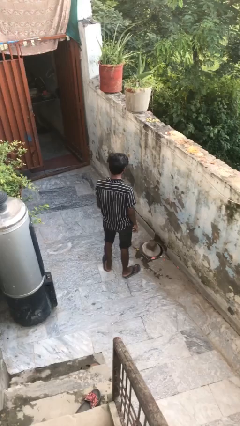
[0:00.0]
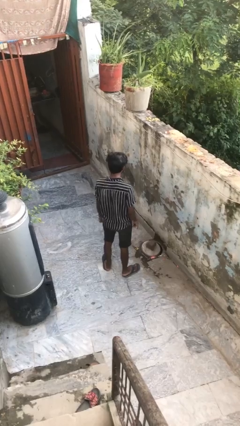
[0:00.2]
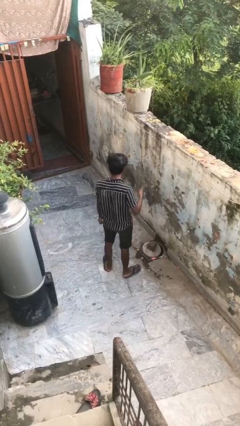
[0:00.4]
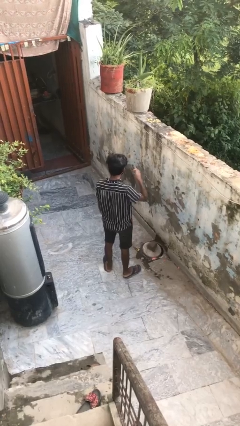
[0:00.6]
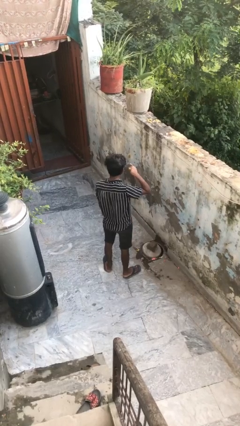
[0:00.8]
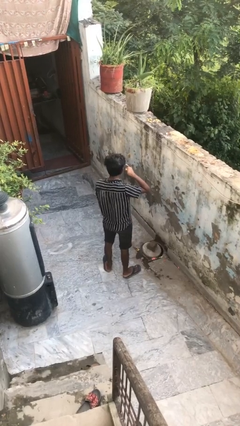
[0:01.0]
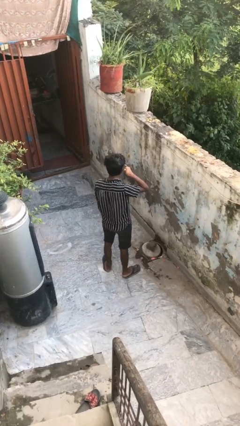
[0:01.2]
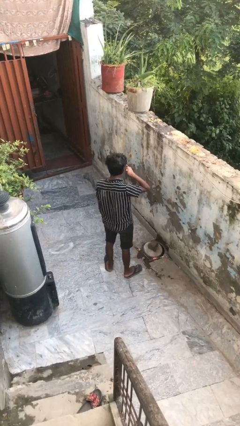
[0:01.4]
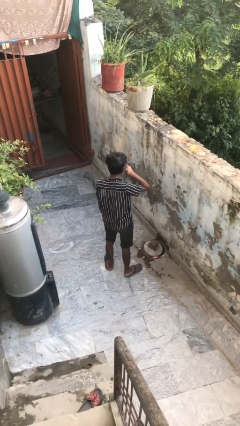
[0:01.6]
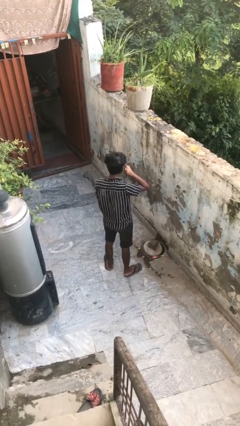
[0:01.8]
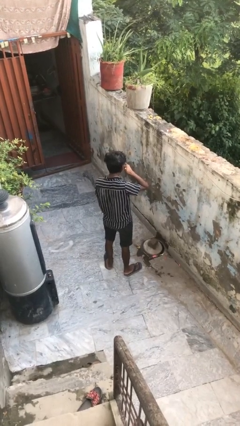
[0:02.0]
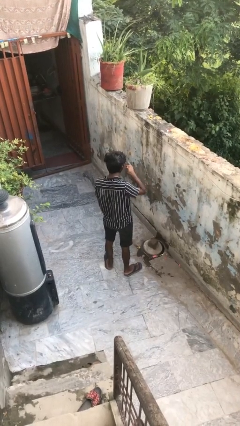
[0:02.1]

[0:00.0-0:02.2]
person gestures call me

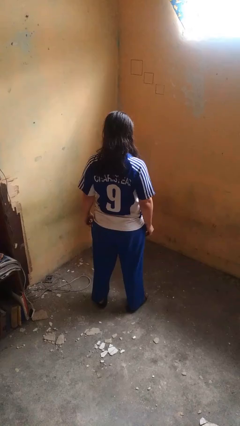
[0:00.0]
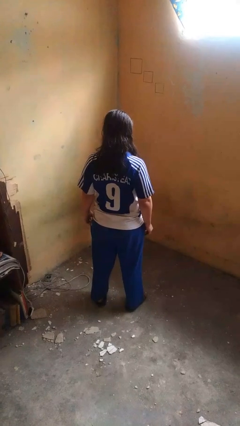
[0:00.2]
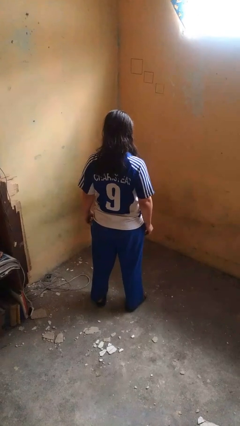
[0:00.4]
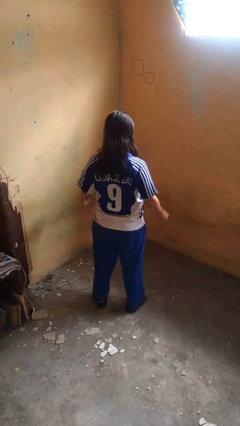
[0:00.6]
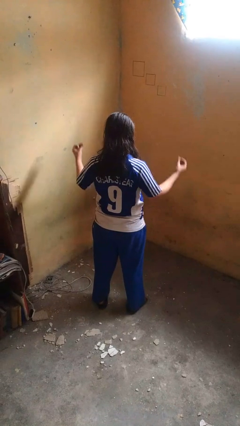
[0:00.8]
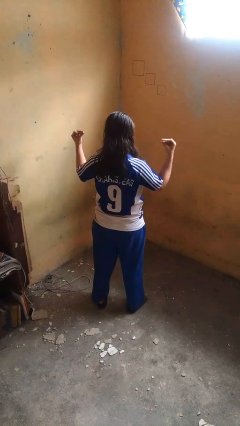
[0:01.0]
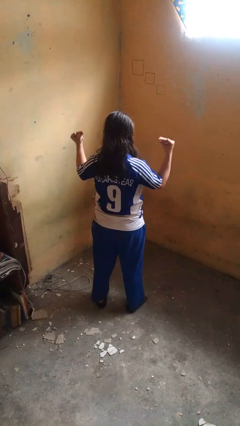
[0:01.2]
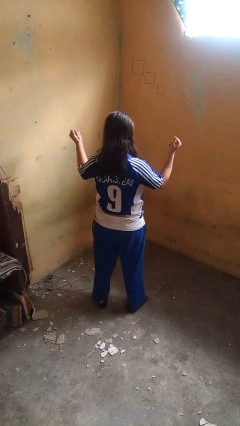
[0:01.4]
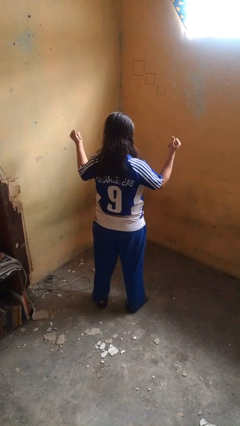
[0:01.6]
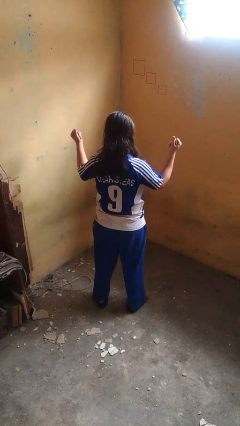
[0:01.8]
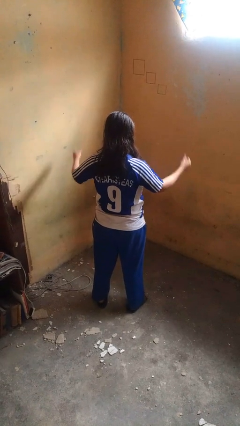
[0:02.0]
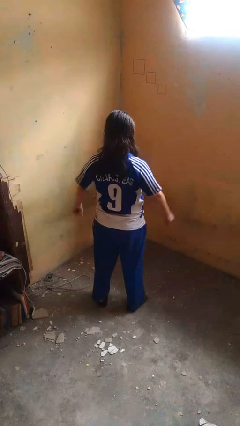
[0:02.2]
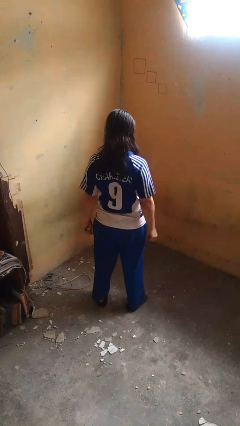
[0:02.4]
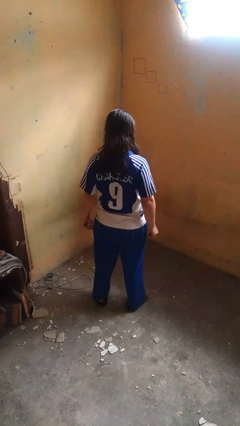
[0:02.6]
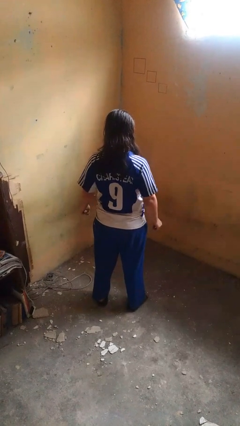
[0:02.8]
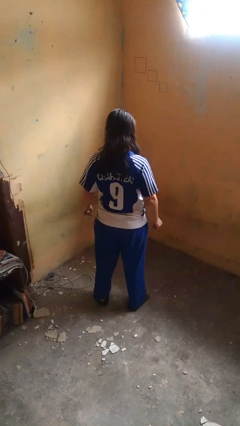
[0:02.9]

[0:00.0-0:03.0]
person snaps fingers

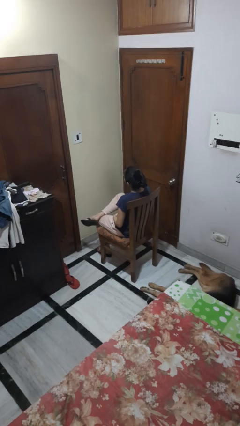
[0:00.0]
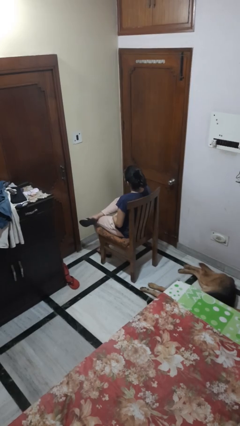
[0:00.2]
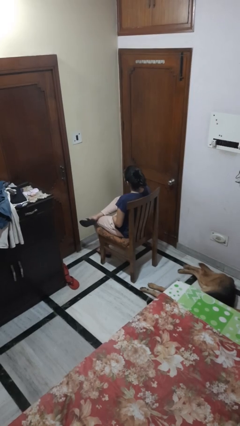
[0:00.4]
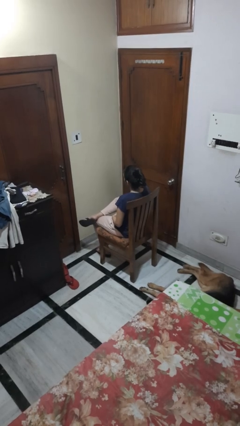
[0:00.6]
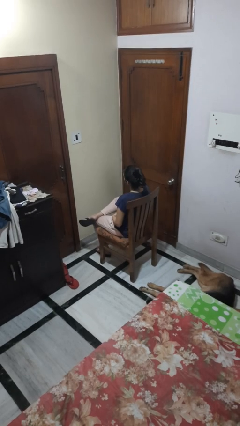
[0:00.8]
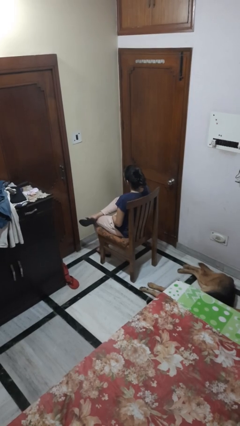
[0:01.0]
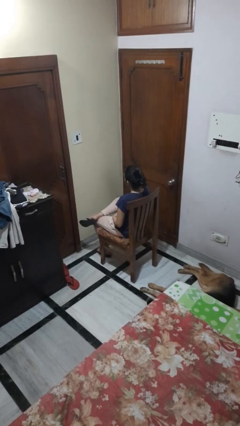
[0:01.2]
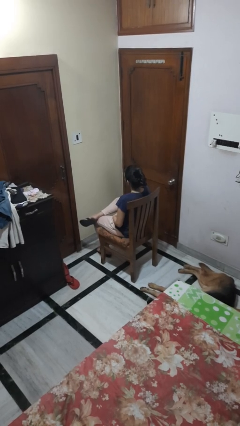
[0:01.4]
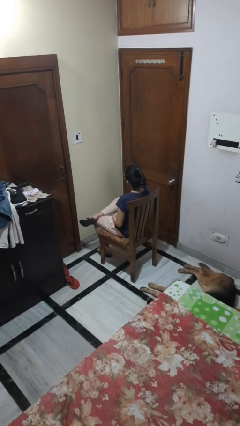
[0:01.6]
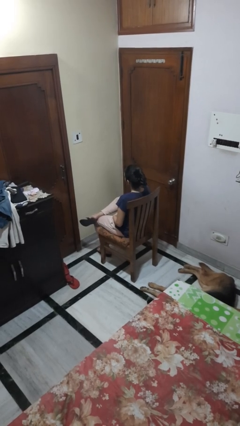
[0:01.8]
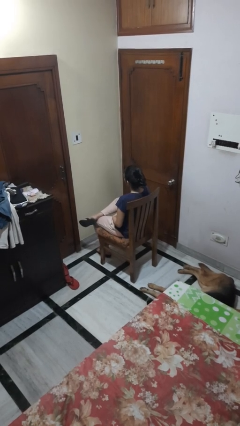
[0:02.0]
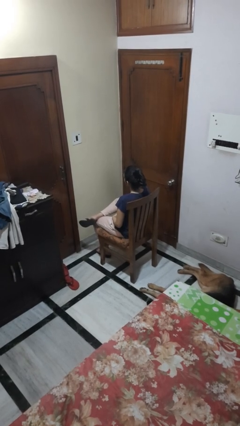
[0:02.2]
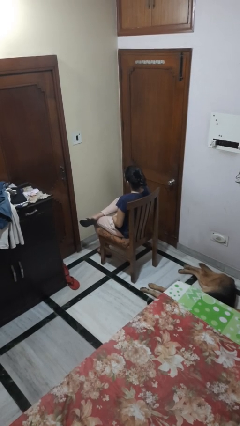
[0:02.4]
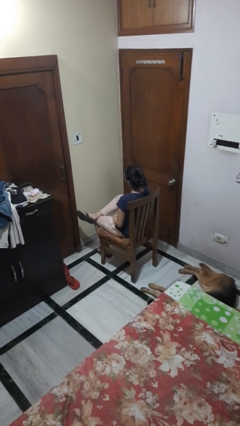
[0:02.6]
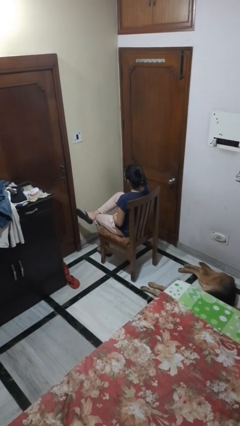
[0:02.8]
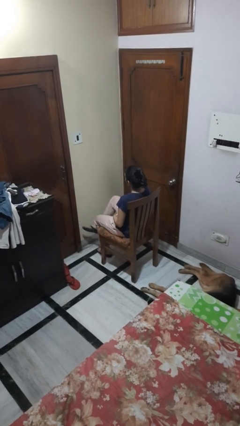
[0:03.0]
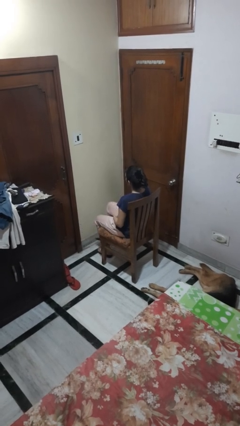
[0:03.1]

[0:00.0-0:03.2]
person crosses legs

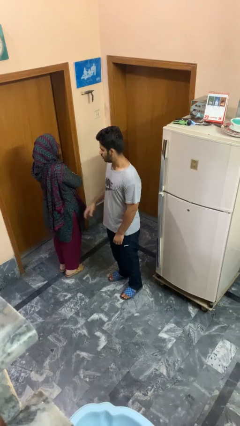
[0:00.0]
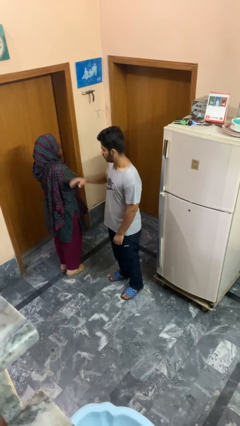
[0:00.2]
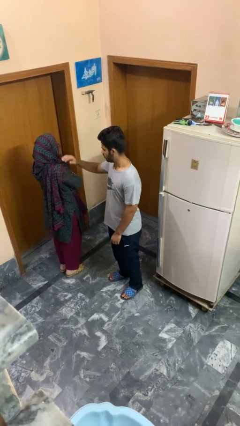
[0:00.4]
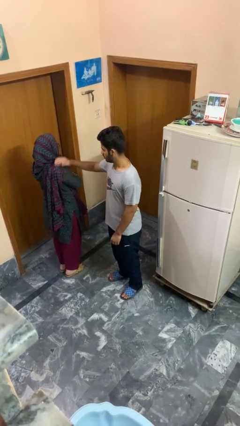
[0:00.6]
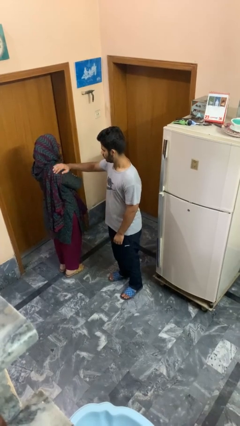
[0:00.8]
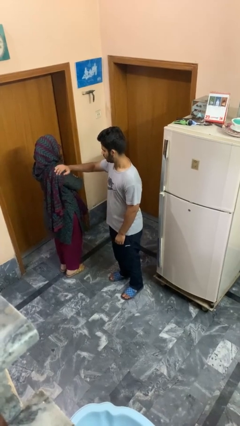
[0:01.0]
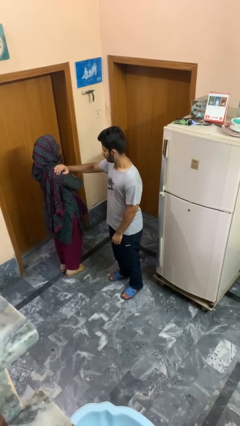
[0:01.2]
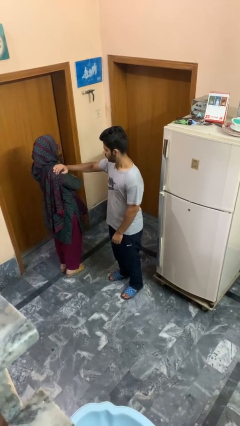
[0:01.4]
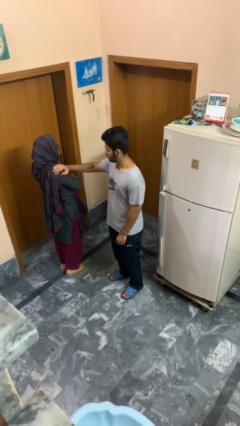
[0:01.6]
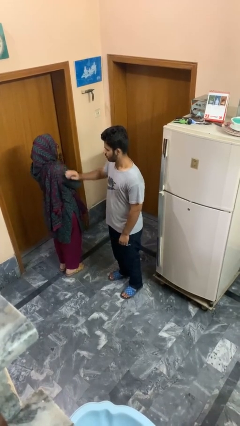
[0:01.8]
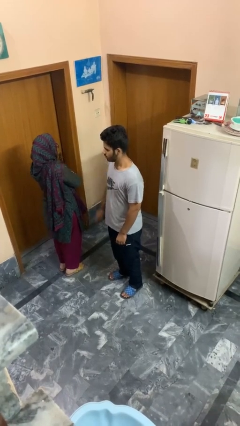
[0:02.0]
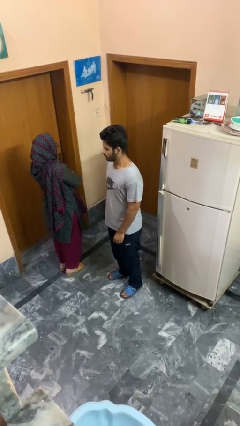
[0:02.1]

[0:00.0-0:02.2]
person pounds shoulders of person

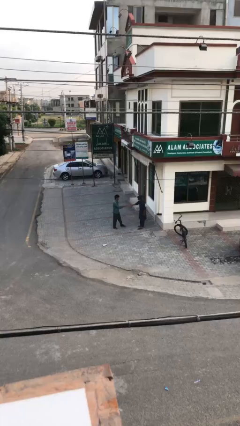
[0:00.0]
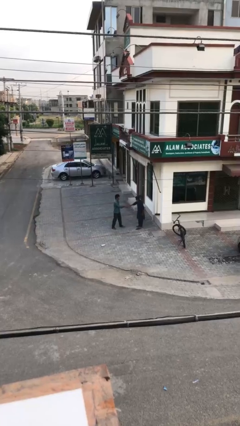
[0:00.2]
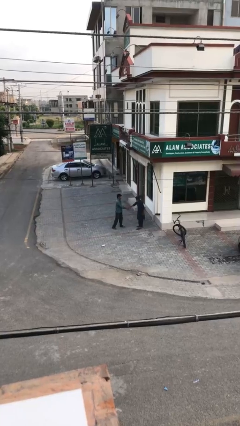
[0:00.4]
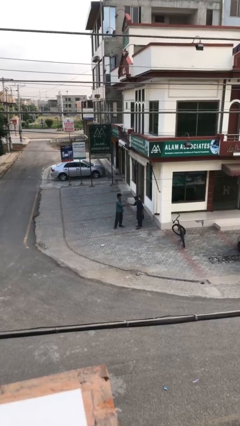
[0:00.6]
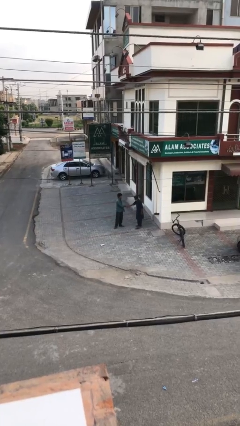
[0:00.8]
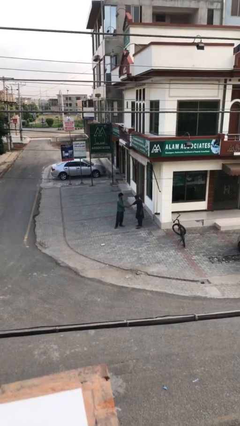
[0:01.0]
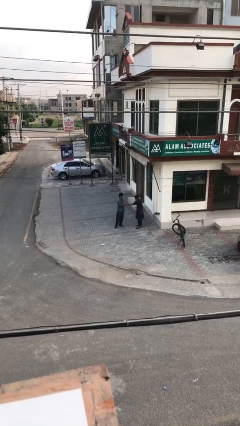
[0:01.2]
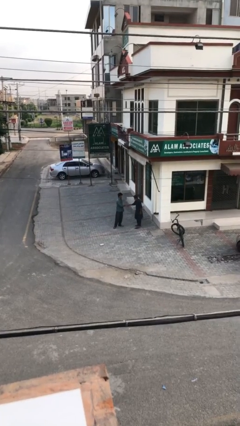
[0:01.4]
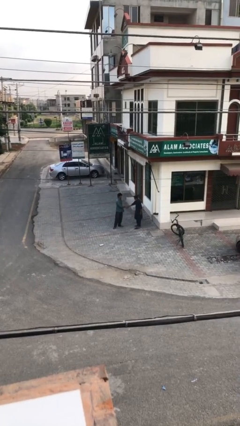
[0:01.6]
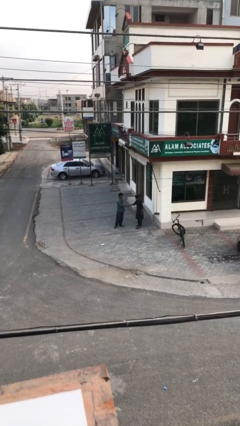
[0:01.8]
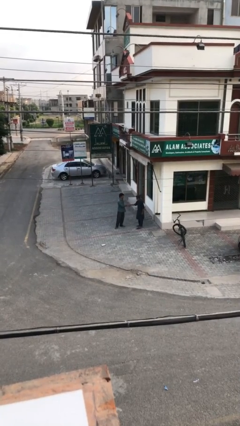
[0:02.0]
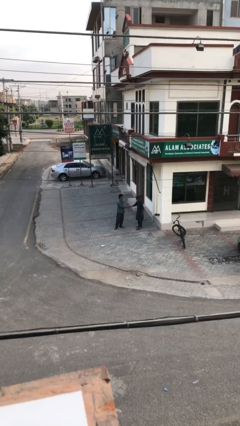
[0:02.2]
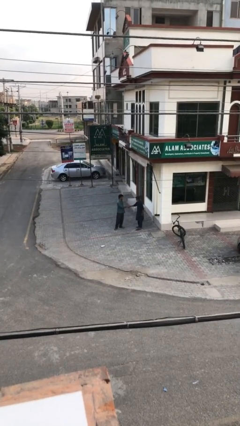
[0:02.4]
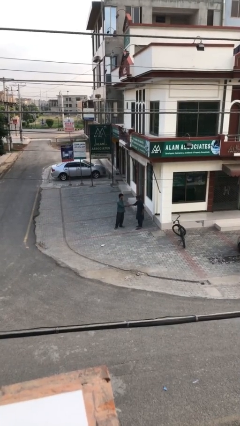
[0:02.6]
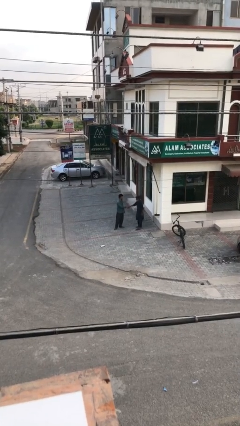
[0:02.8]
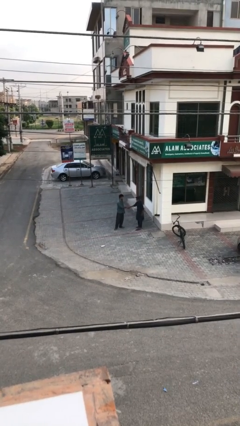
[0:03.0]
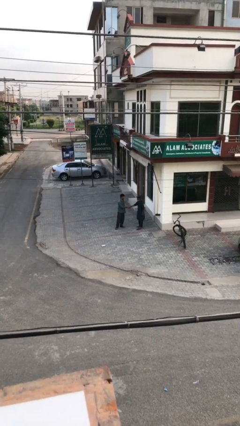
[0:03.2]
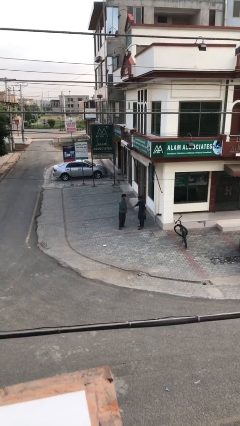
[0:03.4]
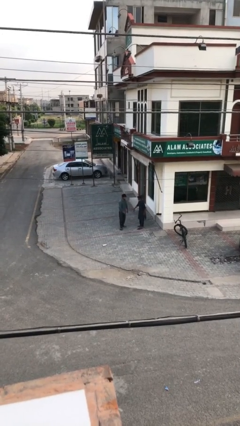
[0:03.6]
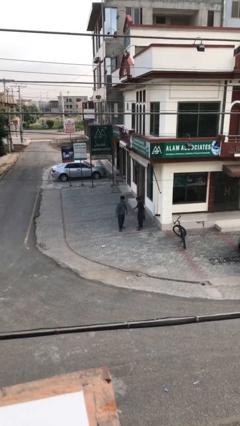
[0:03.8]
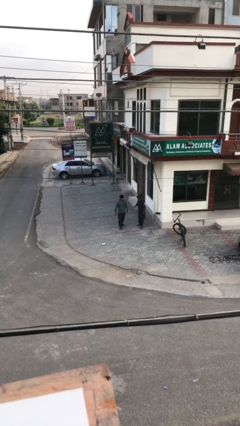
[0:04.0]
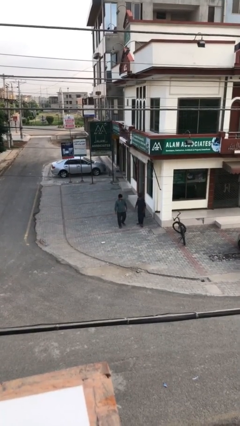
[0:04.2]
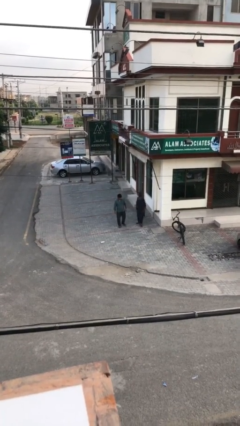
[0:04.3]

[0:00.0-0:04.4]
person shakes hand

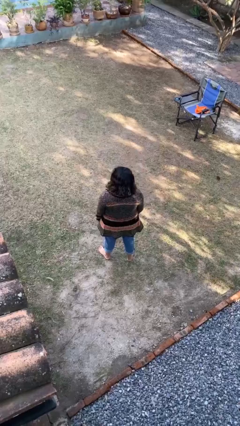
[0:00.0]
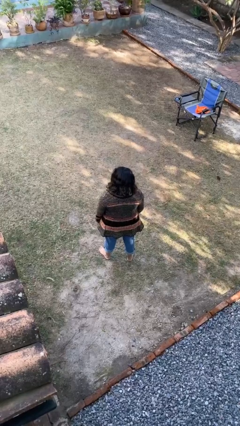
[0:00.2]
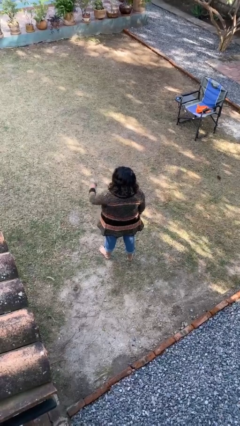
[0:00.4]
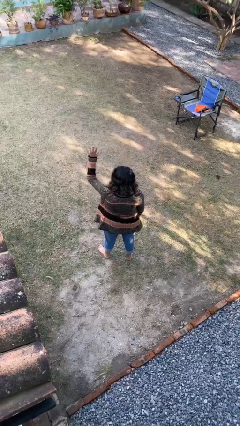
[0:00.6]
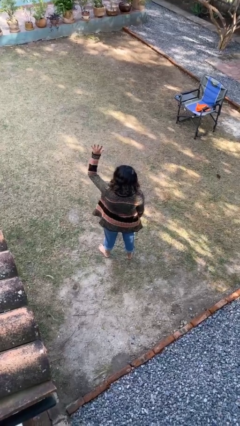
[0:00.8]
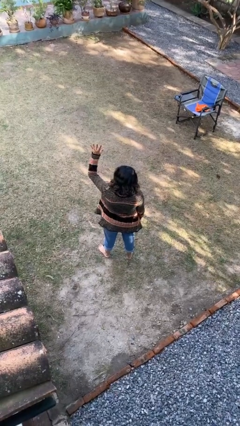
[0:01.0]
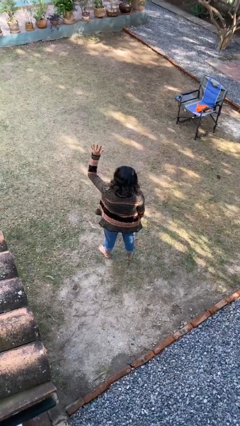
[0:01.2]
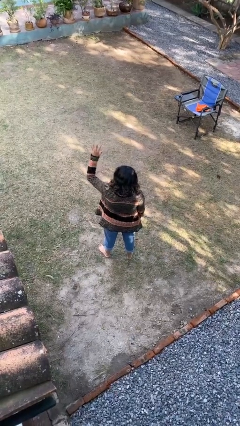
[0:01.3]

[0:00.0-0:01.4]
person gestures number five

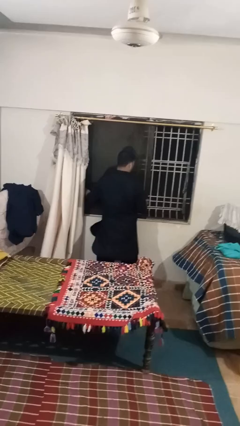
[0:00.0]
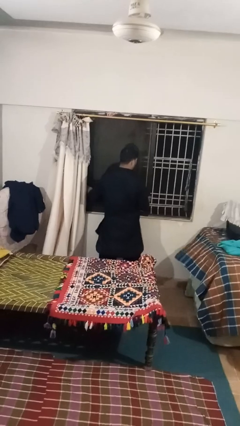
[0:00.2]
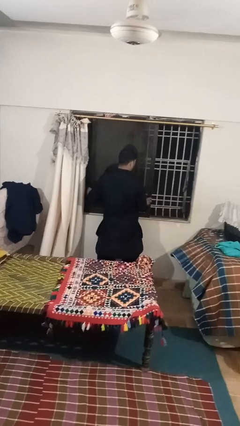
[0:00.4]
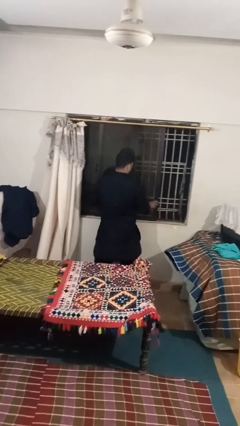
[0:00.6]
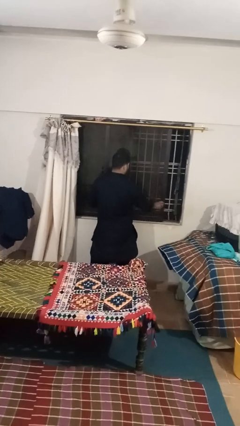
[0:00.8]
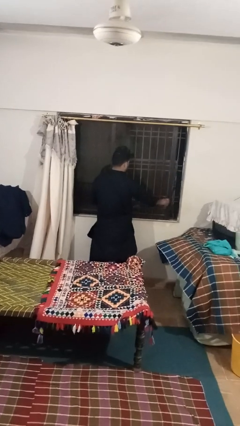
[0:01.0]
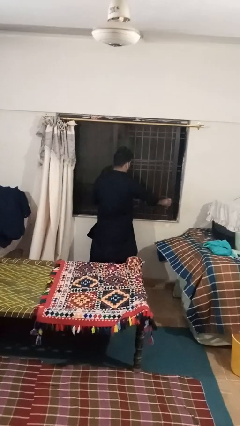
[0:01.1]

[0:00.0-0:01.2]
person closes sliding door
